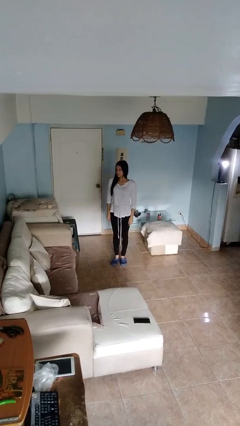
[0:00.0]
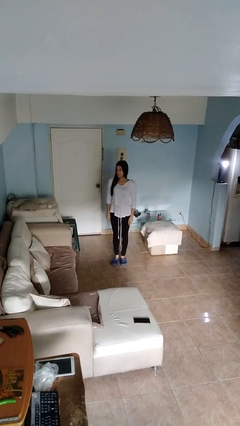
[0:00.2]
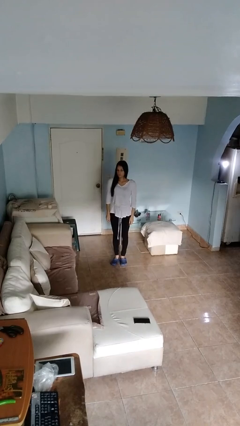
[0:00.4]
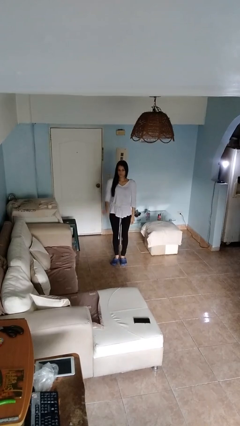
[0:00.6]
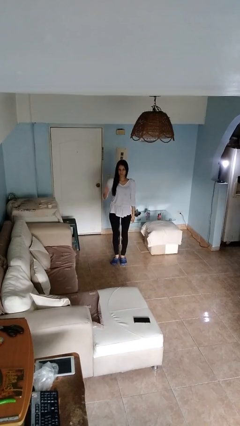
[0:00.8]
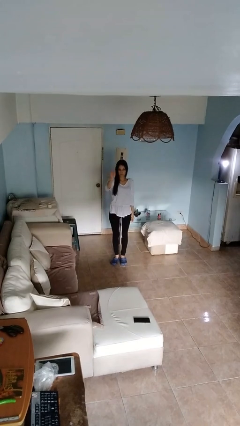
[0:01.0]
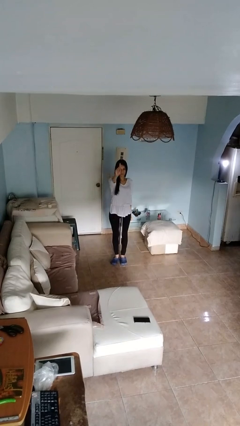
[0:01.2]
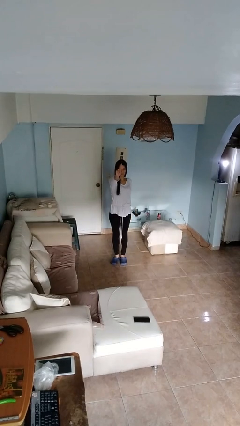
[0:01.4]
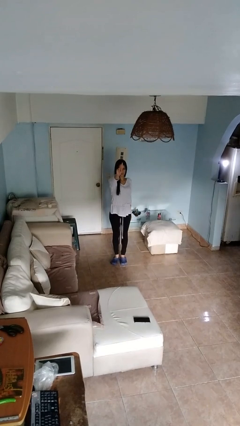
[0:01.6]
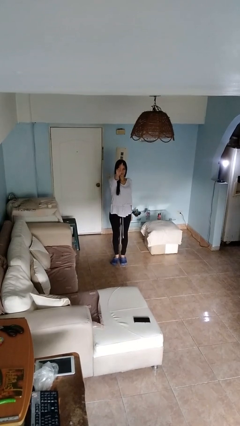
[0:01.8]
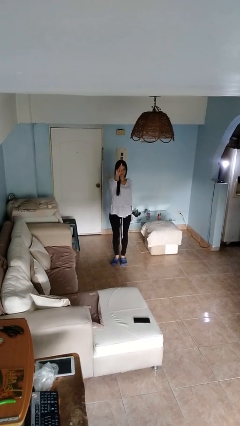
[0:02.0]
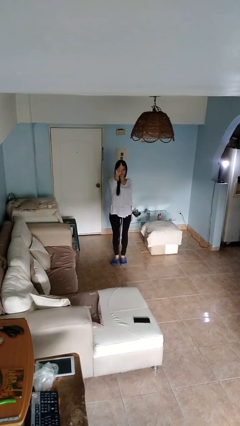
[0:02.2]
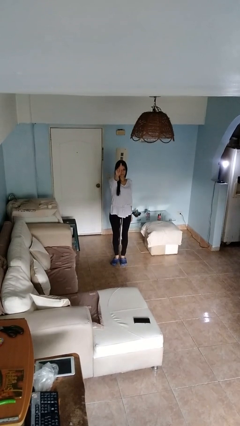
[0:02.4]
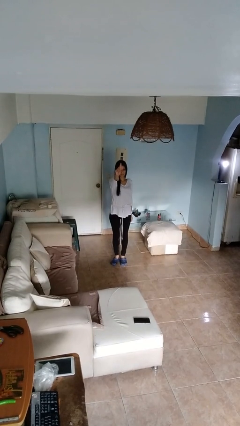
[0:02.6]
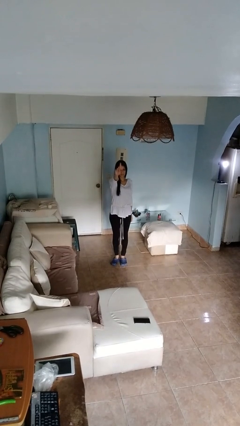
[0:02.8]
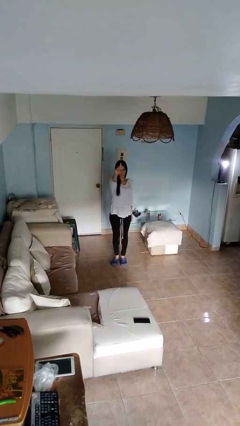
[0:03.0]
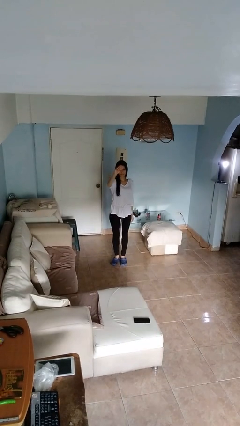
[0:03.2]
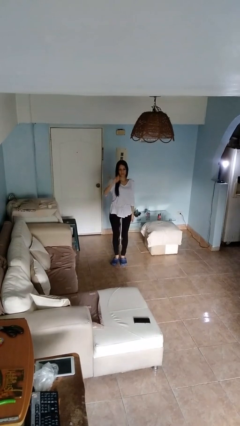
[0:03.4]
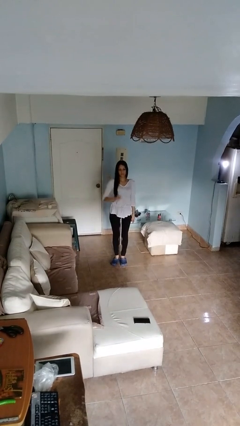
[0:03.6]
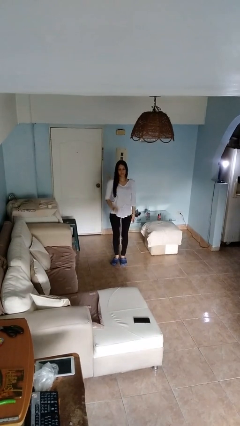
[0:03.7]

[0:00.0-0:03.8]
person gestures number one

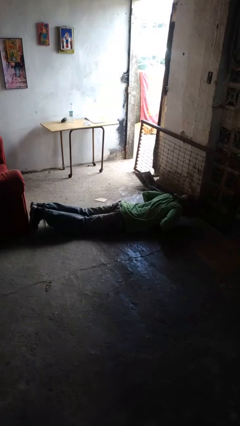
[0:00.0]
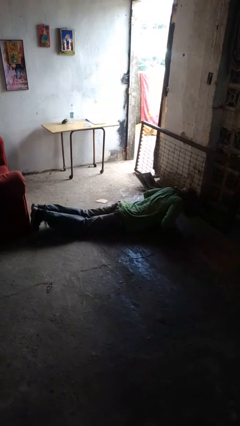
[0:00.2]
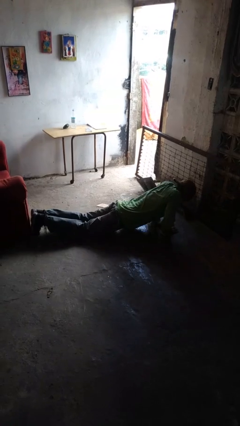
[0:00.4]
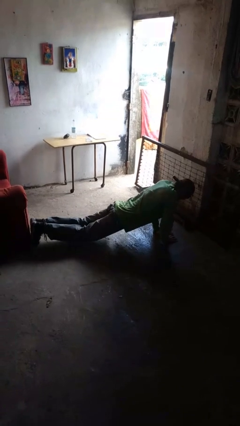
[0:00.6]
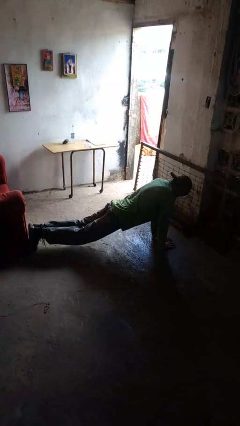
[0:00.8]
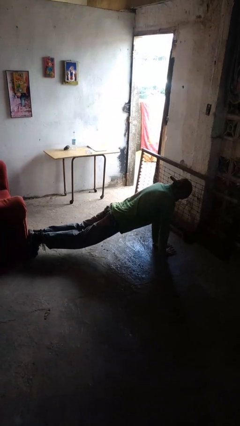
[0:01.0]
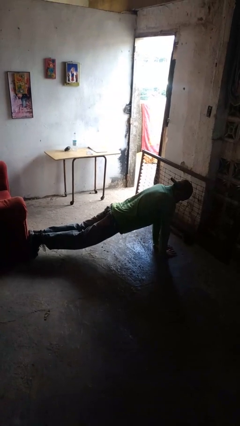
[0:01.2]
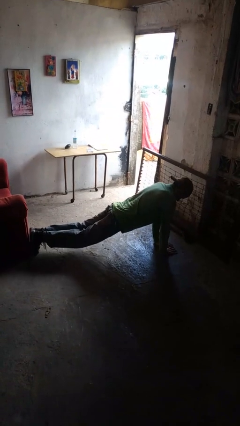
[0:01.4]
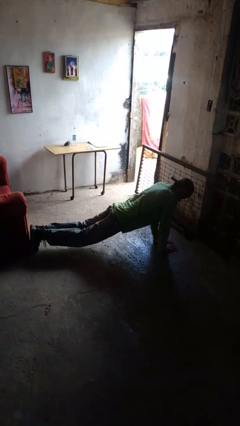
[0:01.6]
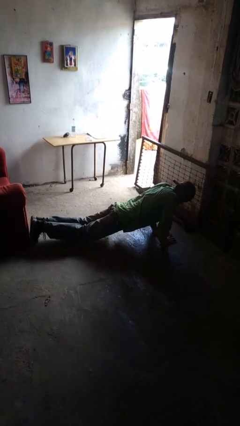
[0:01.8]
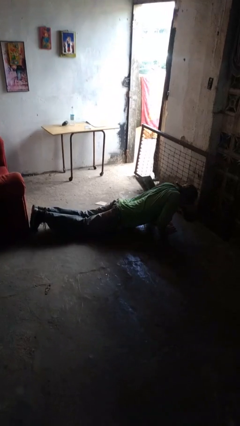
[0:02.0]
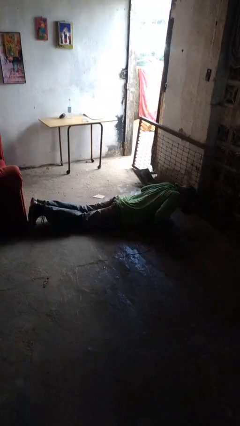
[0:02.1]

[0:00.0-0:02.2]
person exercises with pushup

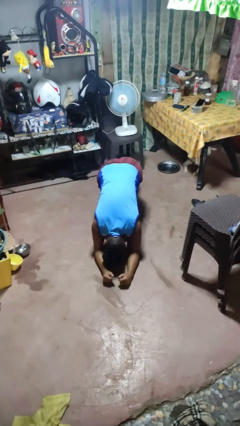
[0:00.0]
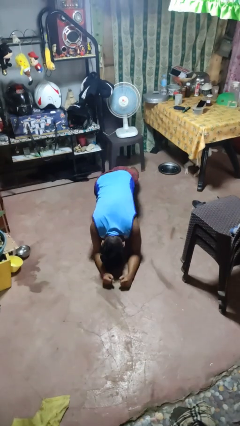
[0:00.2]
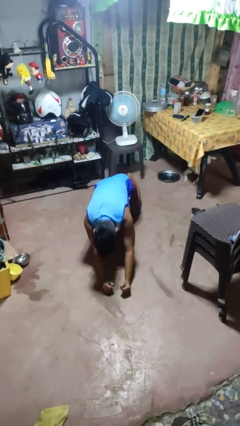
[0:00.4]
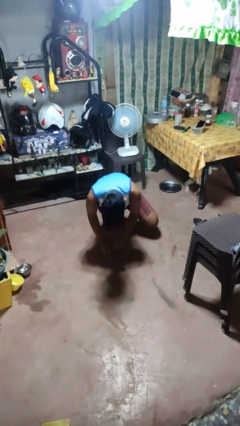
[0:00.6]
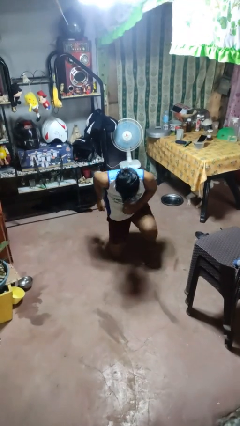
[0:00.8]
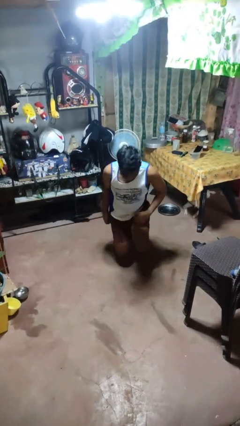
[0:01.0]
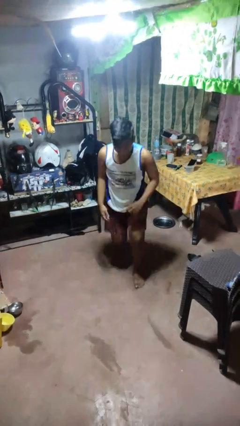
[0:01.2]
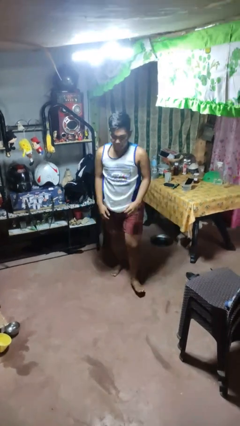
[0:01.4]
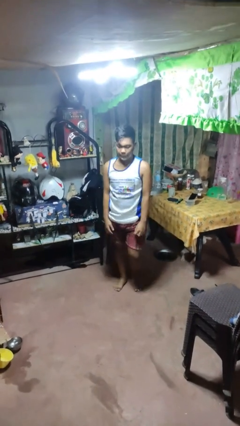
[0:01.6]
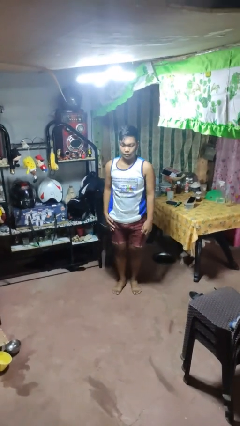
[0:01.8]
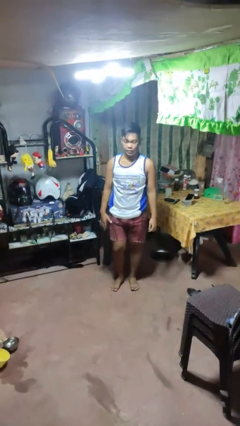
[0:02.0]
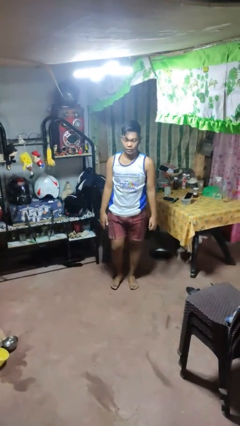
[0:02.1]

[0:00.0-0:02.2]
person stands up from floor

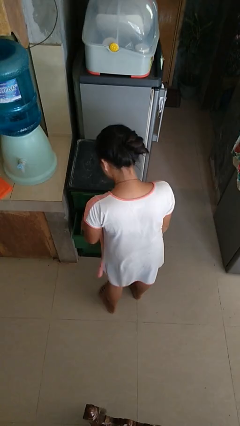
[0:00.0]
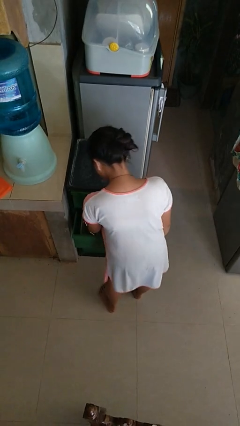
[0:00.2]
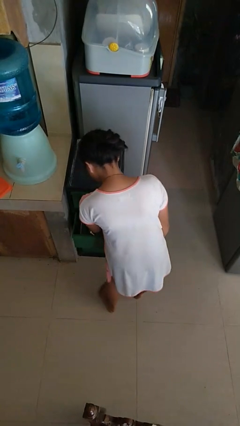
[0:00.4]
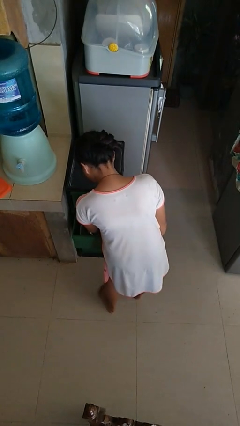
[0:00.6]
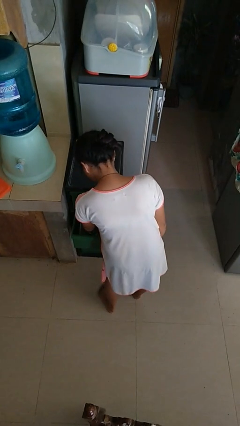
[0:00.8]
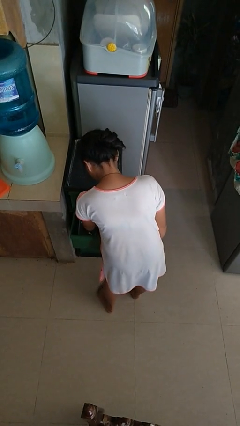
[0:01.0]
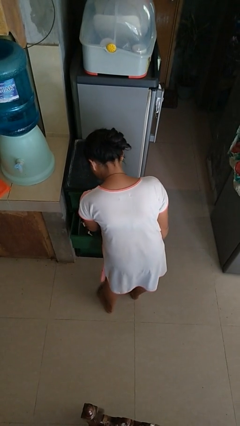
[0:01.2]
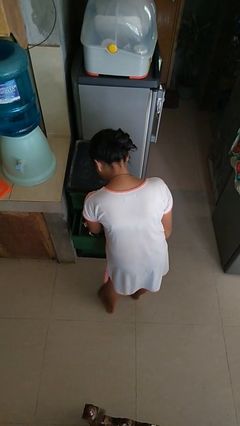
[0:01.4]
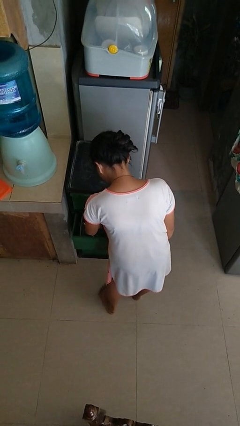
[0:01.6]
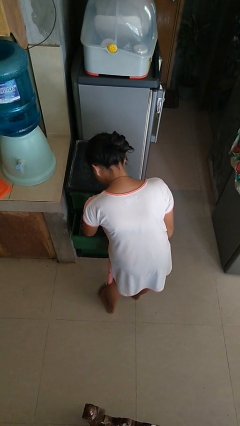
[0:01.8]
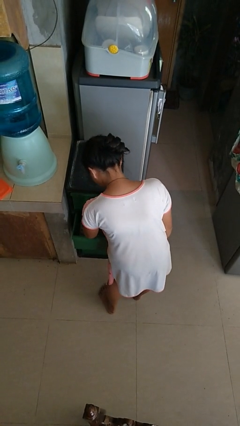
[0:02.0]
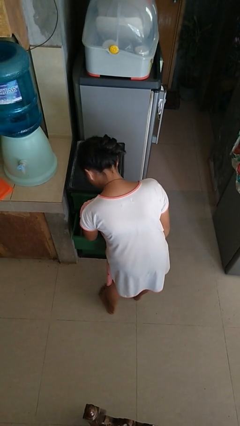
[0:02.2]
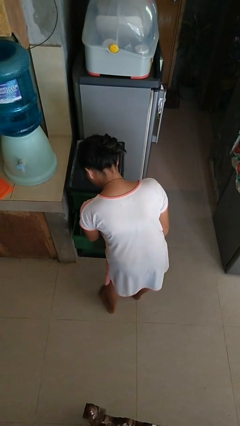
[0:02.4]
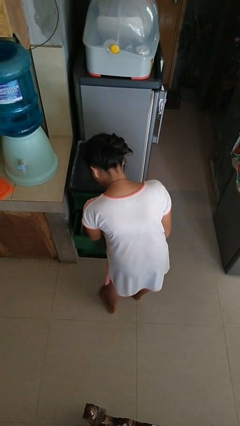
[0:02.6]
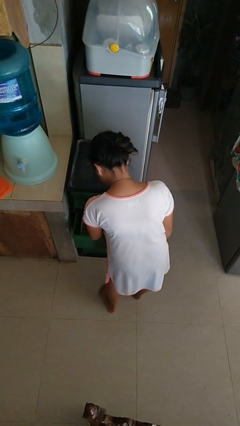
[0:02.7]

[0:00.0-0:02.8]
person searches in kitchen drawer

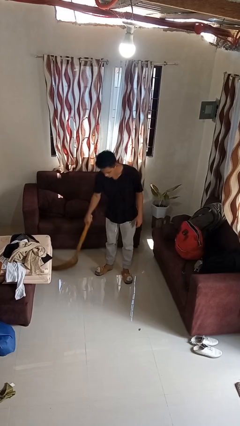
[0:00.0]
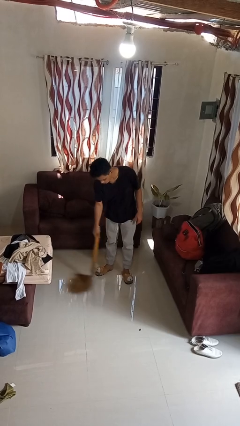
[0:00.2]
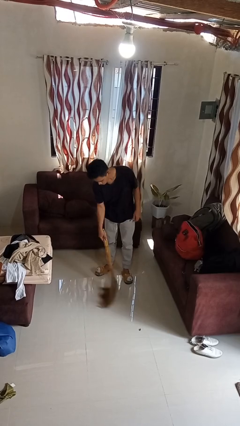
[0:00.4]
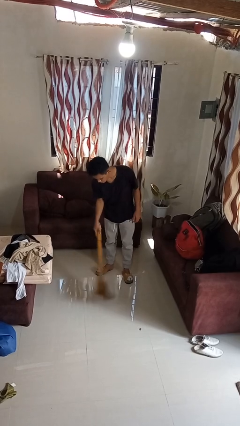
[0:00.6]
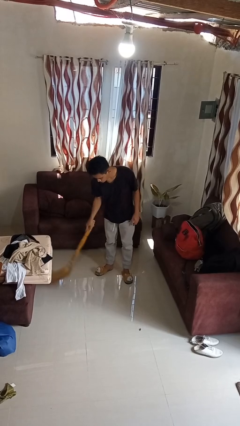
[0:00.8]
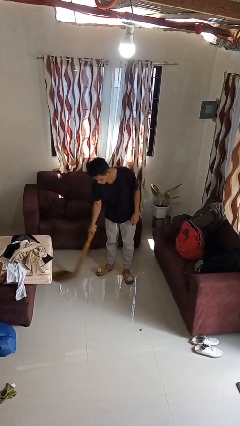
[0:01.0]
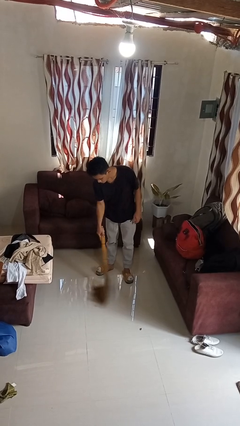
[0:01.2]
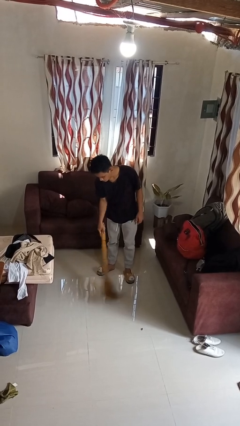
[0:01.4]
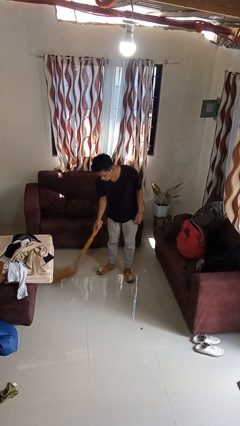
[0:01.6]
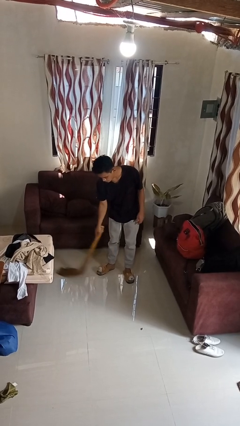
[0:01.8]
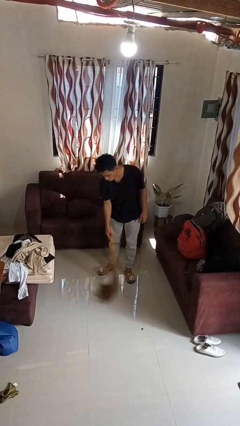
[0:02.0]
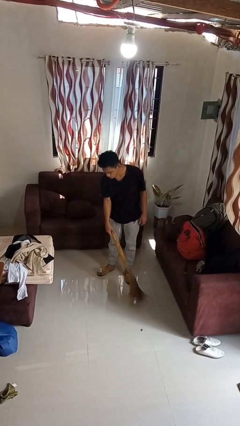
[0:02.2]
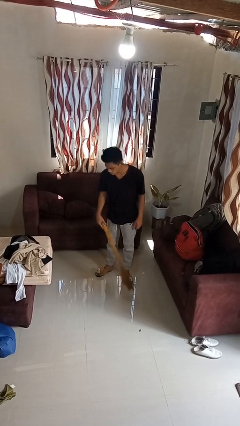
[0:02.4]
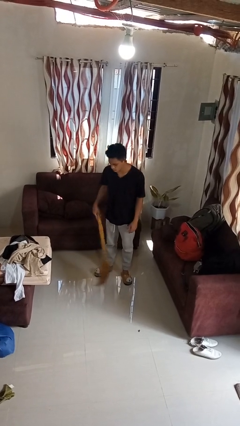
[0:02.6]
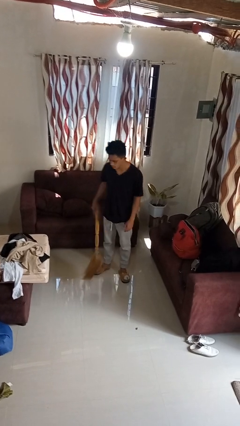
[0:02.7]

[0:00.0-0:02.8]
person sweeps floor

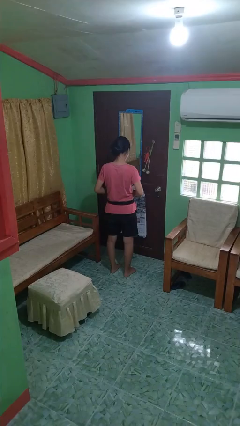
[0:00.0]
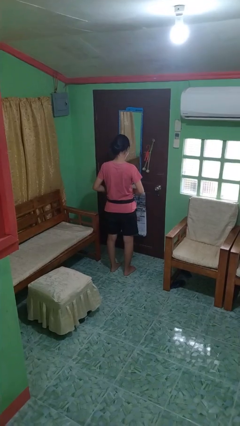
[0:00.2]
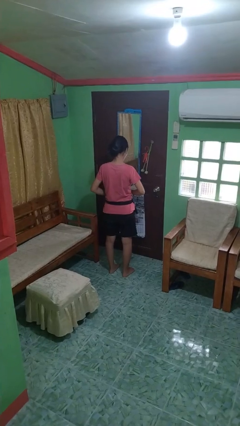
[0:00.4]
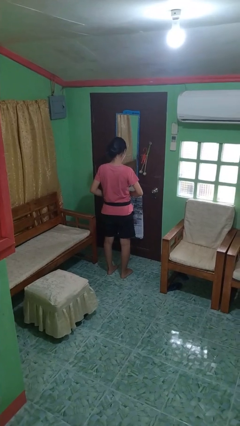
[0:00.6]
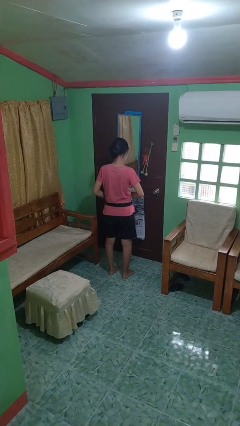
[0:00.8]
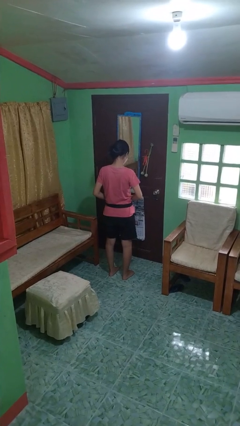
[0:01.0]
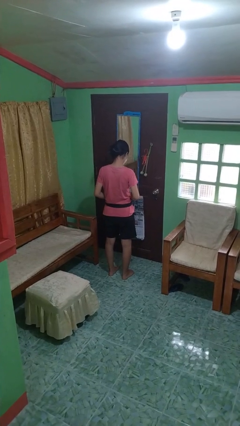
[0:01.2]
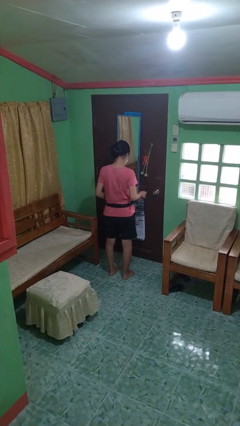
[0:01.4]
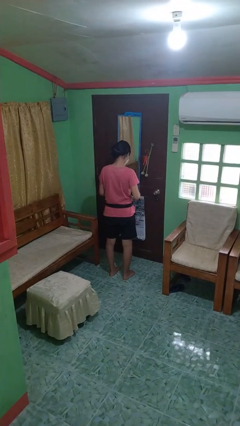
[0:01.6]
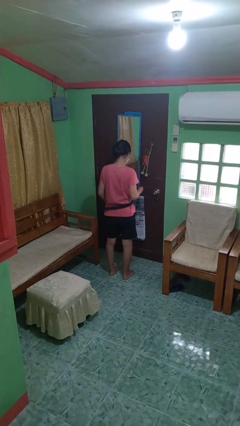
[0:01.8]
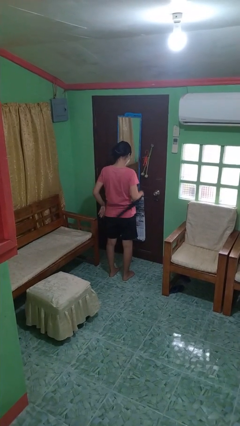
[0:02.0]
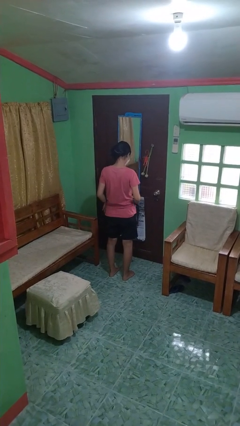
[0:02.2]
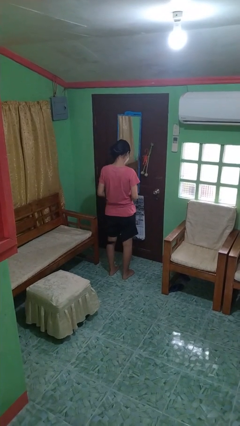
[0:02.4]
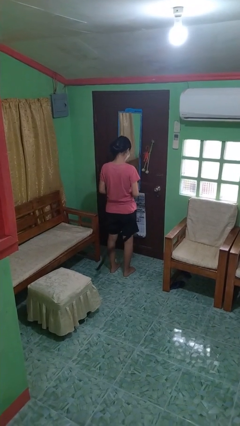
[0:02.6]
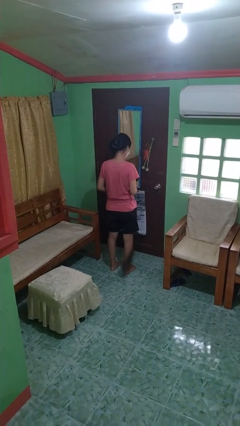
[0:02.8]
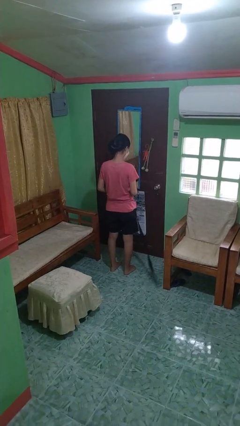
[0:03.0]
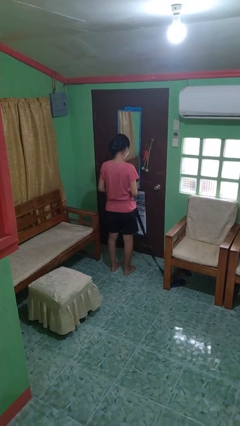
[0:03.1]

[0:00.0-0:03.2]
person takes off belt

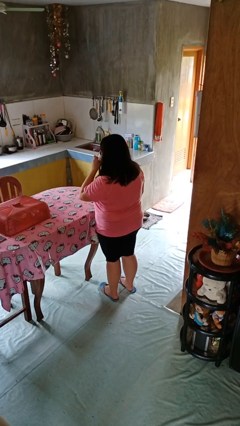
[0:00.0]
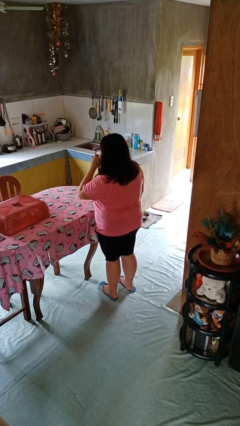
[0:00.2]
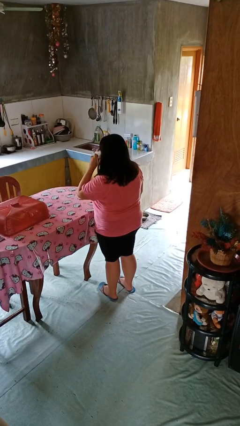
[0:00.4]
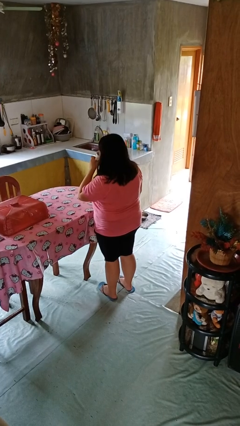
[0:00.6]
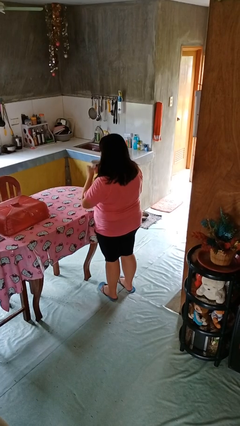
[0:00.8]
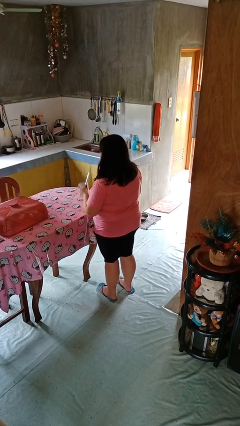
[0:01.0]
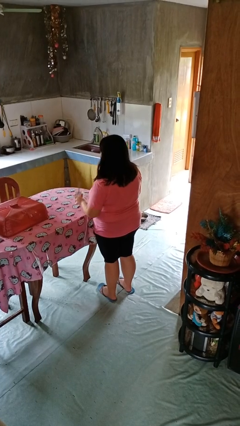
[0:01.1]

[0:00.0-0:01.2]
person drinks from mug
